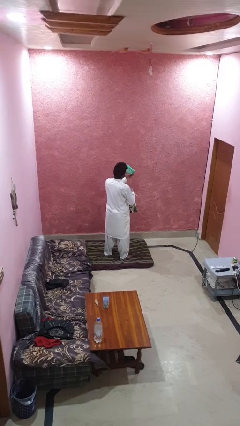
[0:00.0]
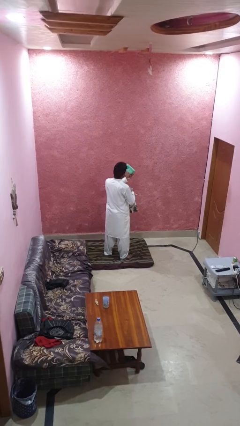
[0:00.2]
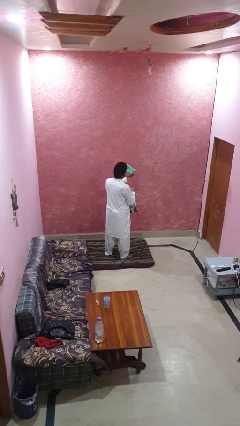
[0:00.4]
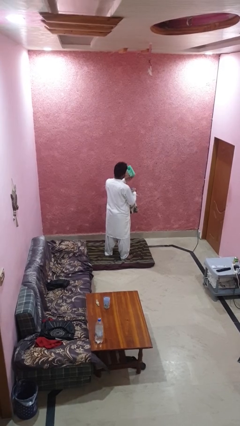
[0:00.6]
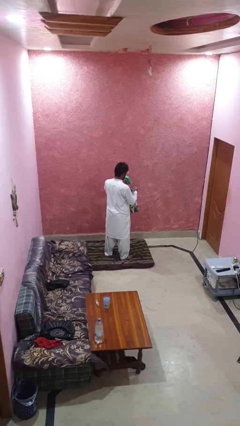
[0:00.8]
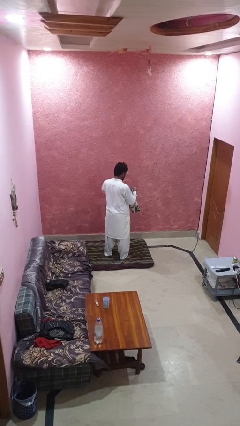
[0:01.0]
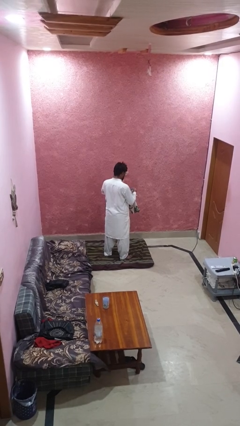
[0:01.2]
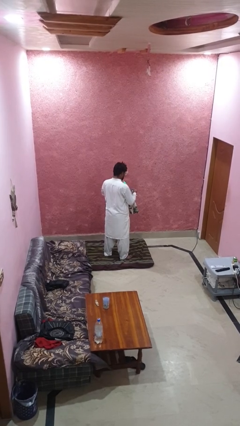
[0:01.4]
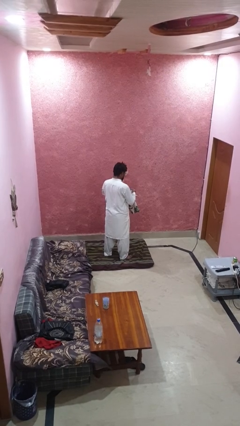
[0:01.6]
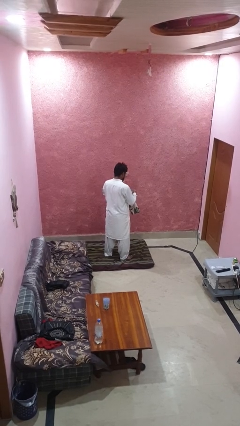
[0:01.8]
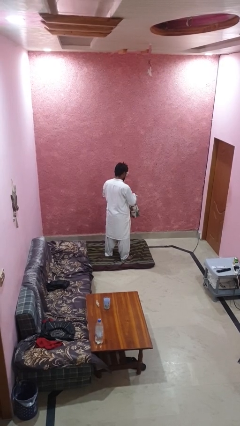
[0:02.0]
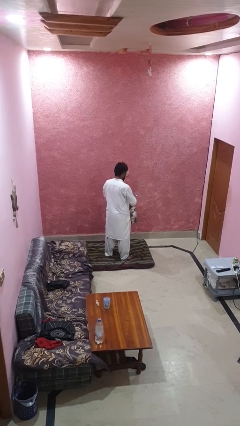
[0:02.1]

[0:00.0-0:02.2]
person puts object into backpack

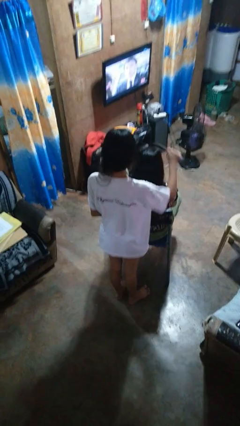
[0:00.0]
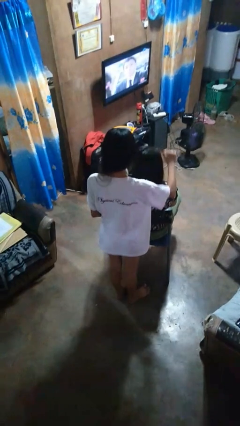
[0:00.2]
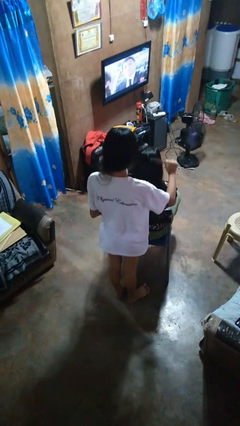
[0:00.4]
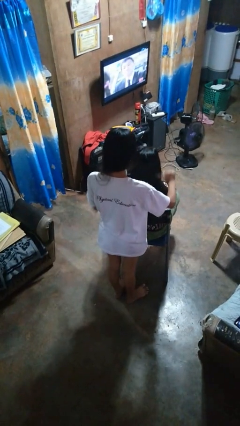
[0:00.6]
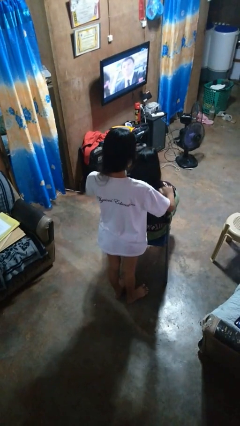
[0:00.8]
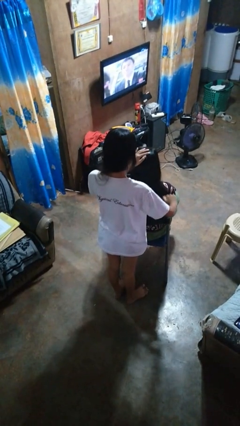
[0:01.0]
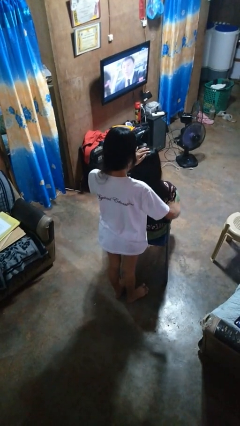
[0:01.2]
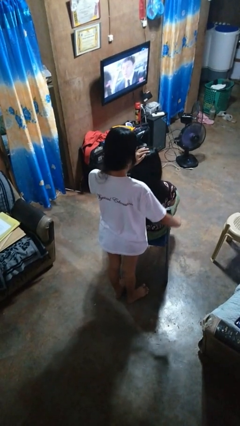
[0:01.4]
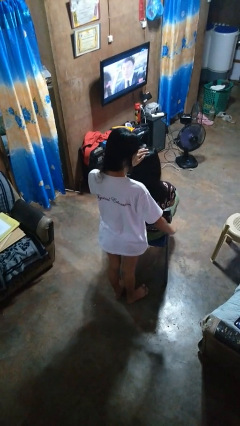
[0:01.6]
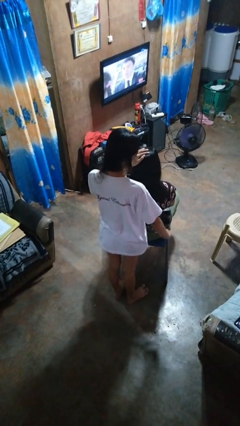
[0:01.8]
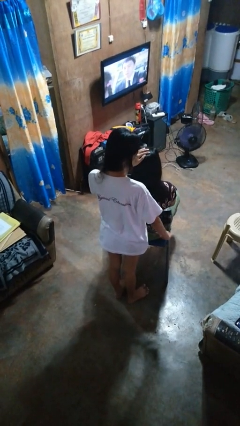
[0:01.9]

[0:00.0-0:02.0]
person brushes hair of person

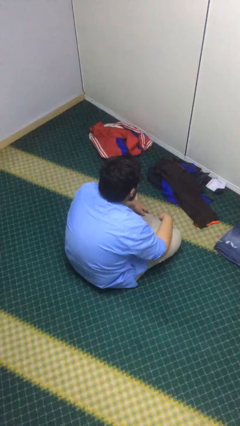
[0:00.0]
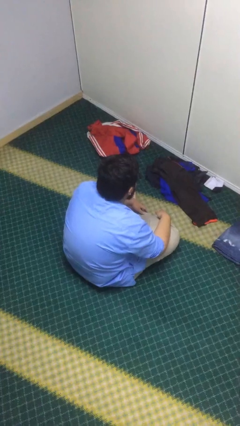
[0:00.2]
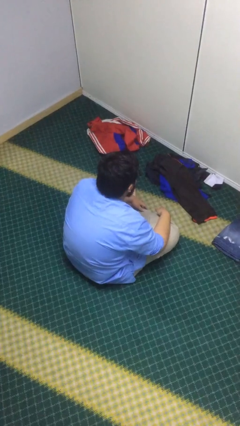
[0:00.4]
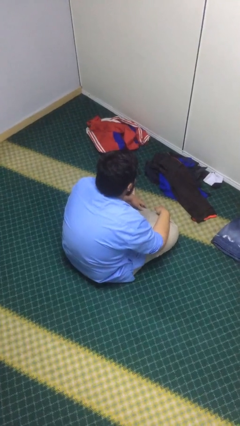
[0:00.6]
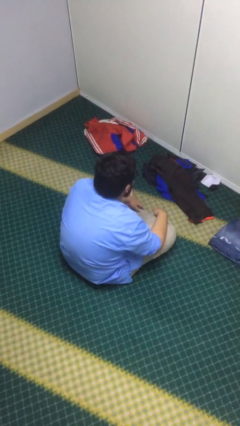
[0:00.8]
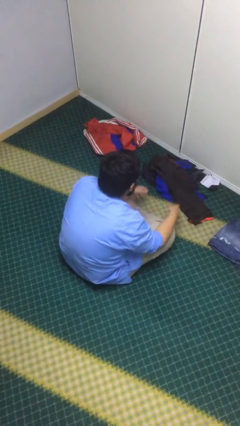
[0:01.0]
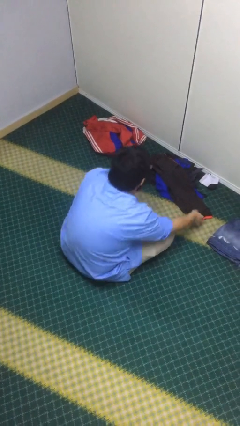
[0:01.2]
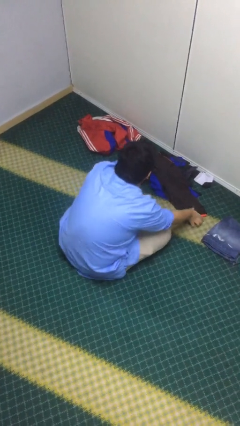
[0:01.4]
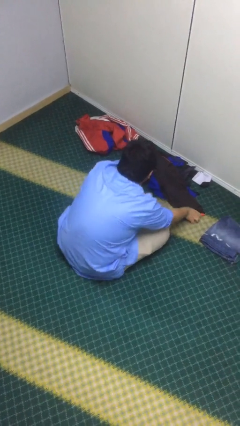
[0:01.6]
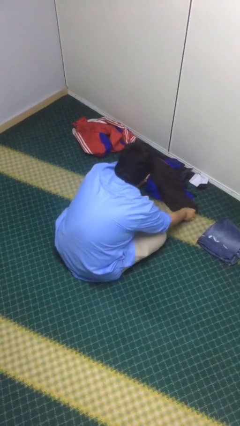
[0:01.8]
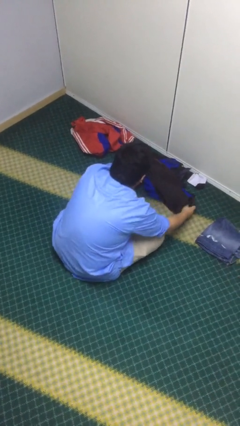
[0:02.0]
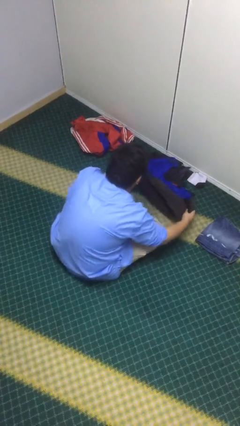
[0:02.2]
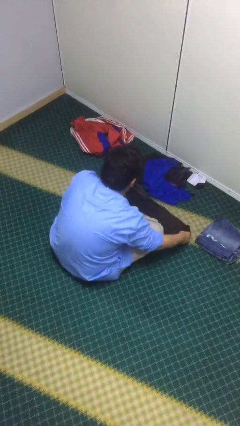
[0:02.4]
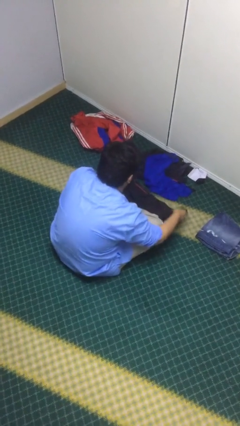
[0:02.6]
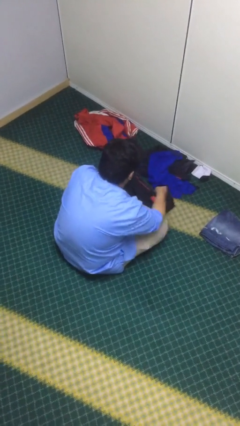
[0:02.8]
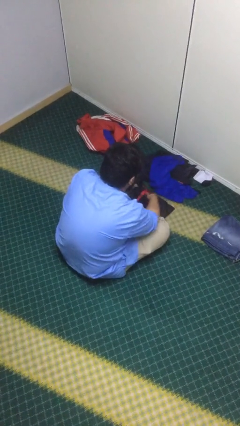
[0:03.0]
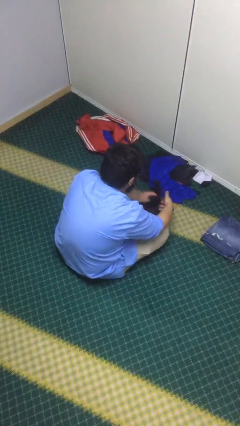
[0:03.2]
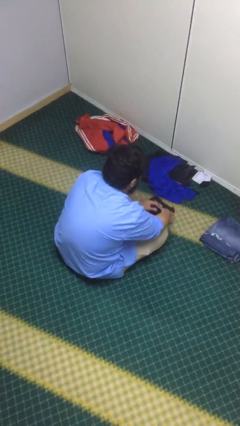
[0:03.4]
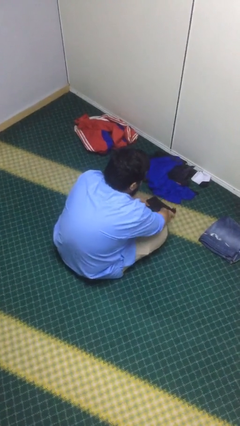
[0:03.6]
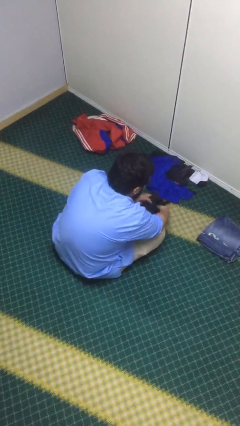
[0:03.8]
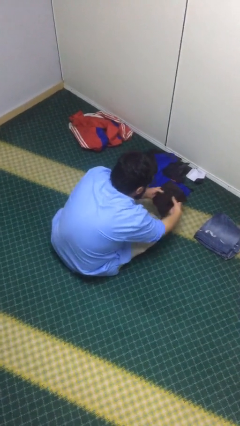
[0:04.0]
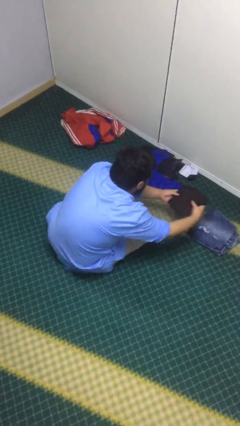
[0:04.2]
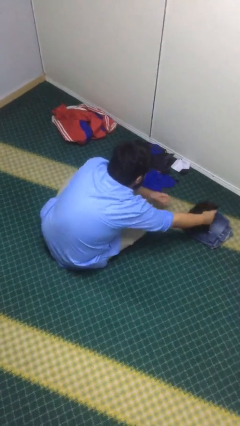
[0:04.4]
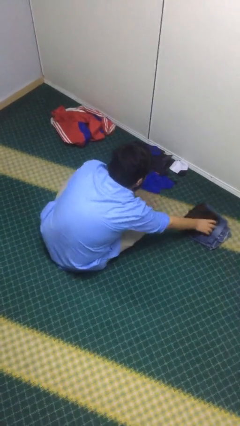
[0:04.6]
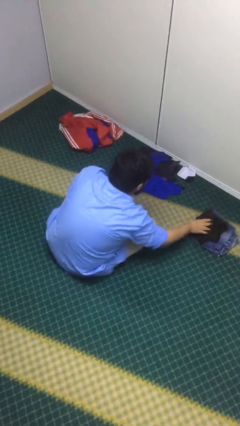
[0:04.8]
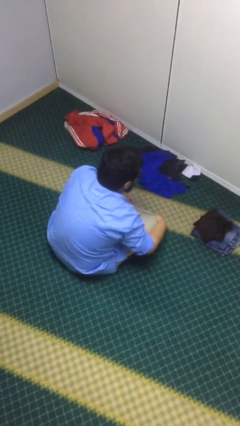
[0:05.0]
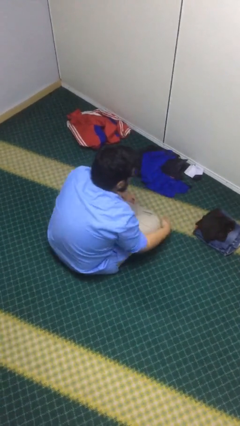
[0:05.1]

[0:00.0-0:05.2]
person folds shirt

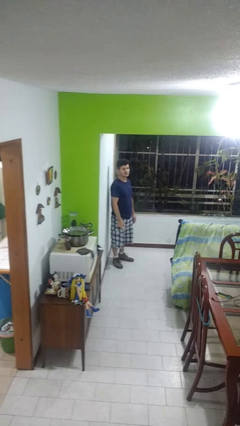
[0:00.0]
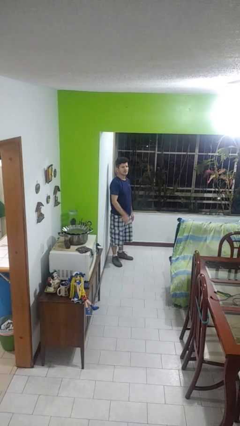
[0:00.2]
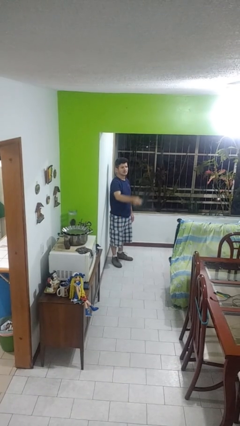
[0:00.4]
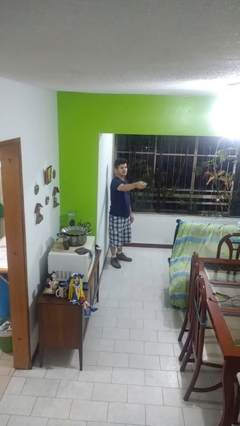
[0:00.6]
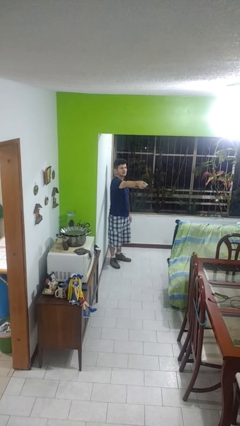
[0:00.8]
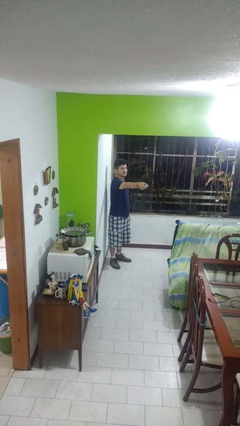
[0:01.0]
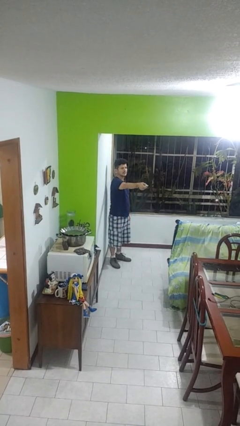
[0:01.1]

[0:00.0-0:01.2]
person uses television remote

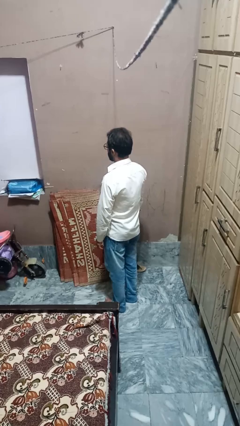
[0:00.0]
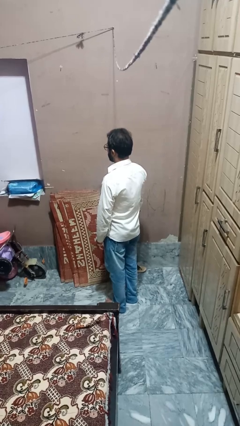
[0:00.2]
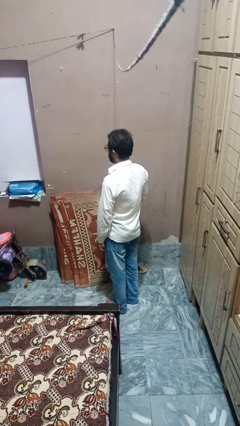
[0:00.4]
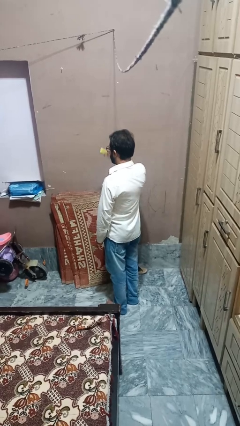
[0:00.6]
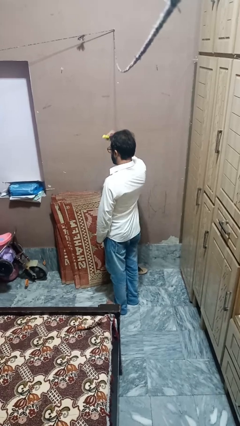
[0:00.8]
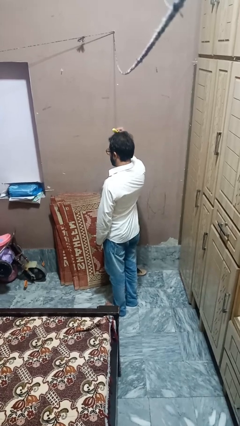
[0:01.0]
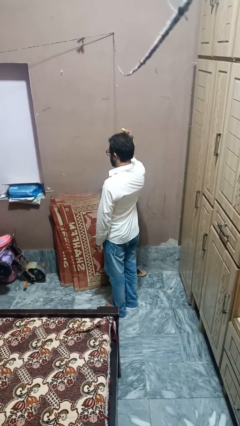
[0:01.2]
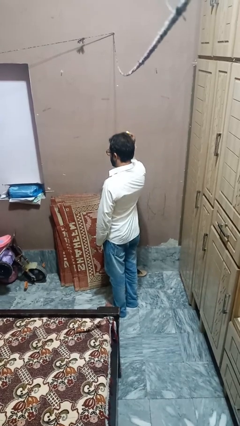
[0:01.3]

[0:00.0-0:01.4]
person brushes hair

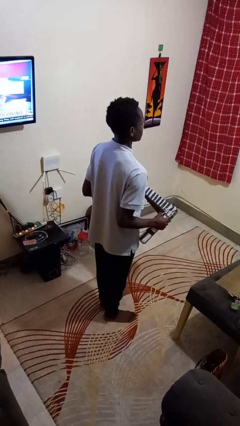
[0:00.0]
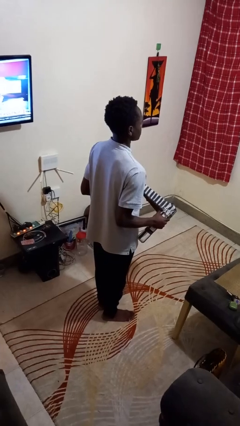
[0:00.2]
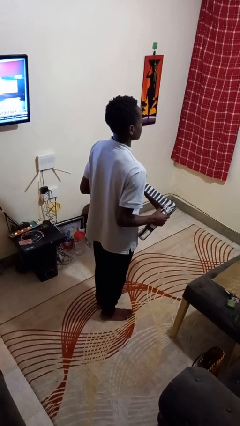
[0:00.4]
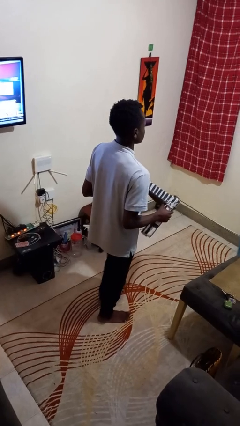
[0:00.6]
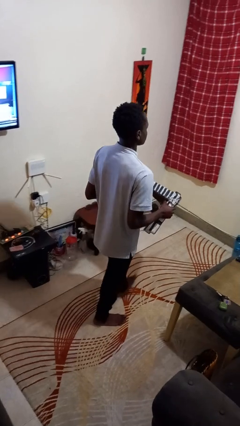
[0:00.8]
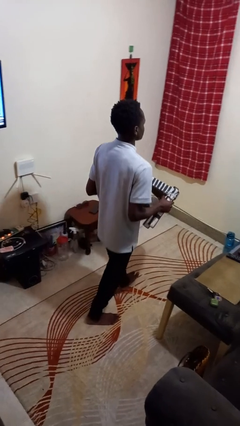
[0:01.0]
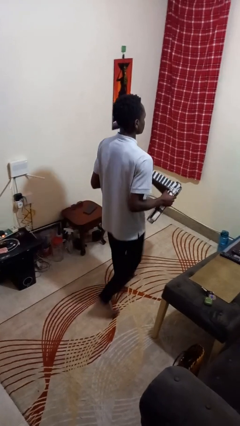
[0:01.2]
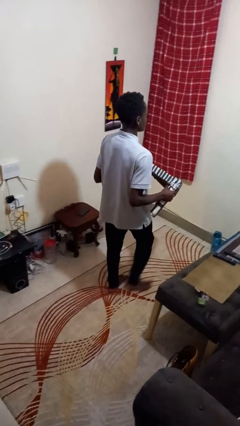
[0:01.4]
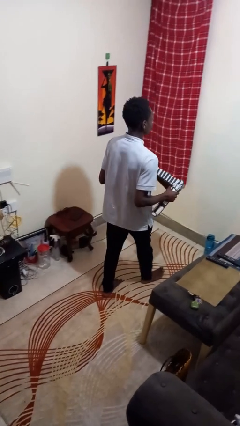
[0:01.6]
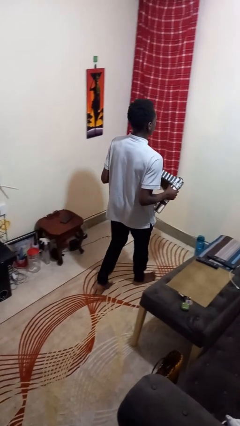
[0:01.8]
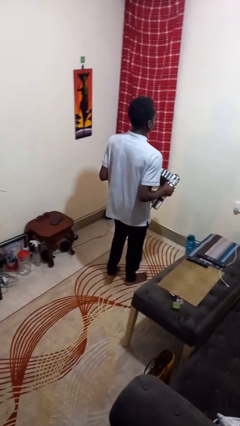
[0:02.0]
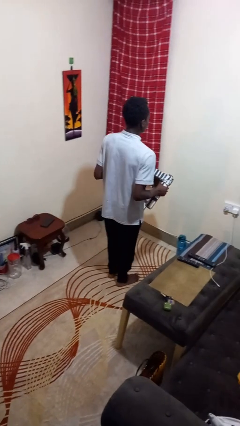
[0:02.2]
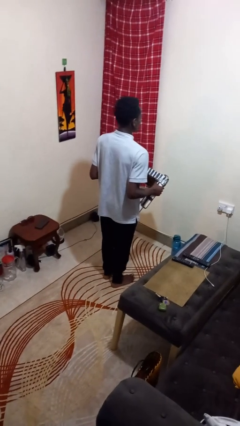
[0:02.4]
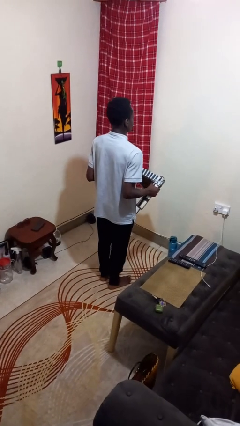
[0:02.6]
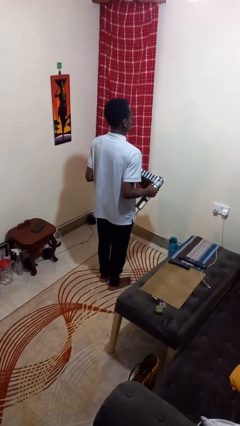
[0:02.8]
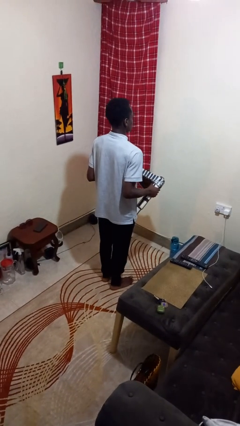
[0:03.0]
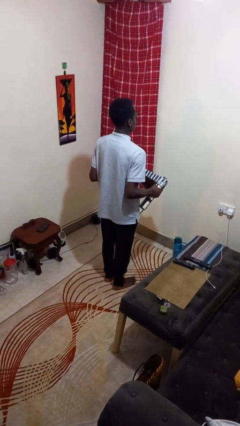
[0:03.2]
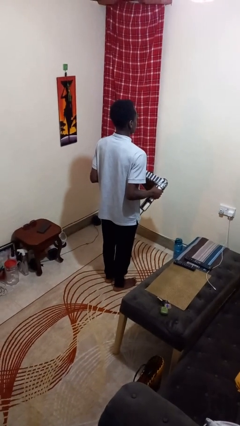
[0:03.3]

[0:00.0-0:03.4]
person carries furniture

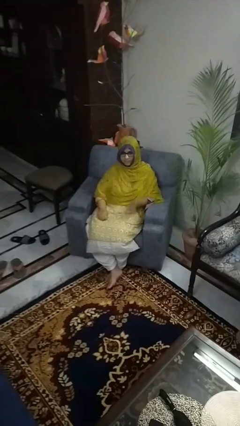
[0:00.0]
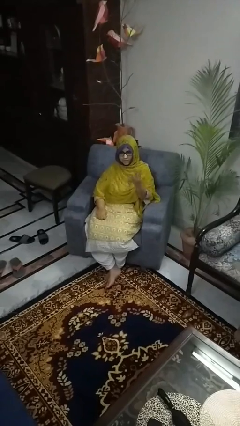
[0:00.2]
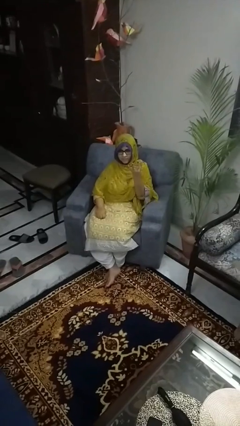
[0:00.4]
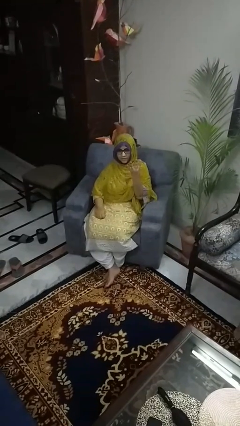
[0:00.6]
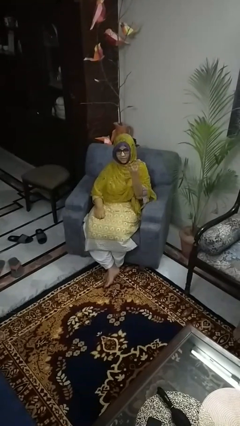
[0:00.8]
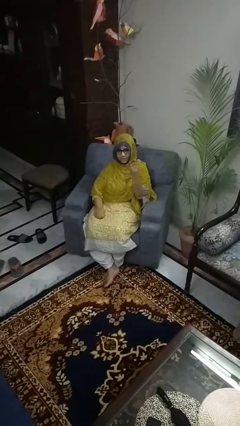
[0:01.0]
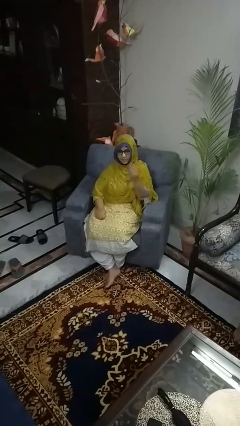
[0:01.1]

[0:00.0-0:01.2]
person gestures number four

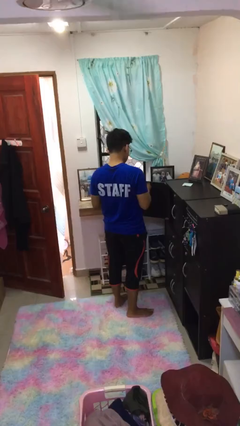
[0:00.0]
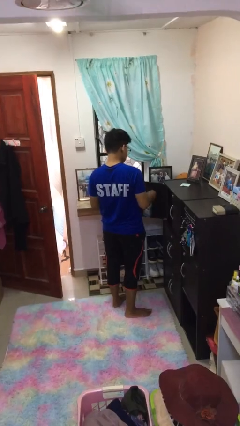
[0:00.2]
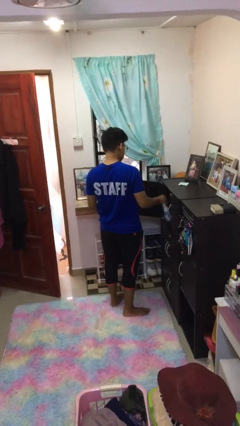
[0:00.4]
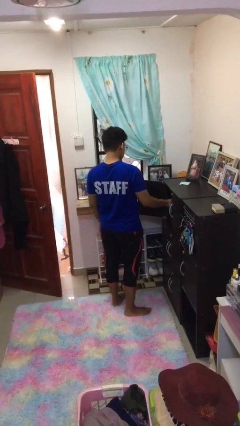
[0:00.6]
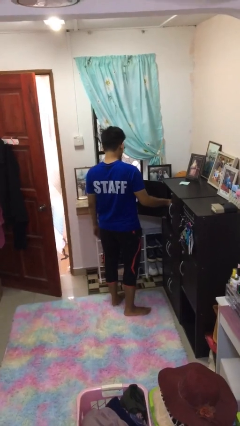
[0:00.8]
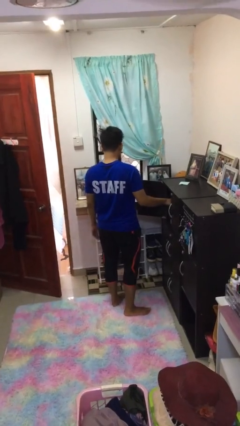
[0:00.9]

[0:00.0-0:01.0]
person puts down object into cabinet
